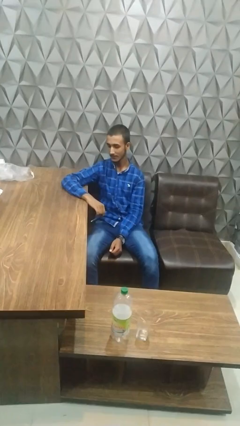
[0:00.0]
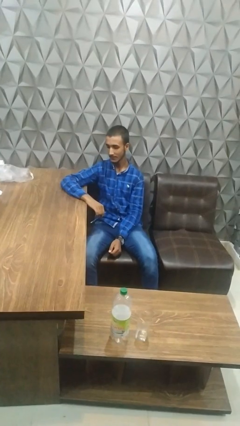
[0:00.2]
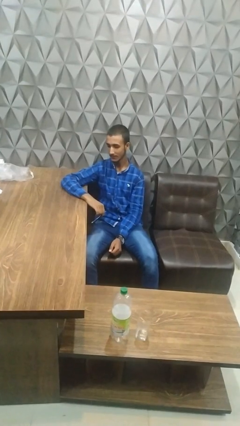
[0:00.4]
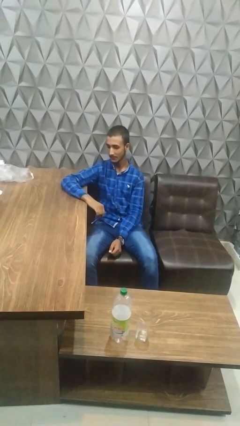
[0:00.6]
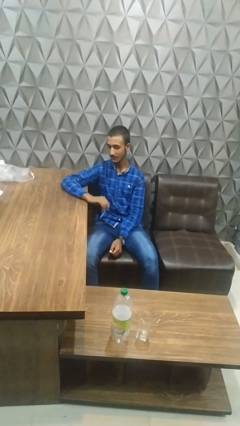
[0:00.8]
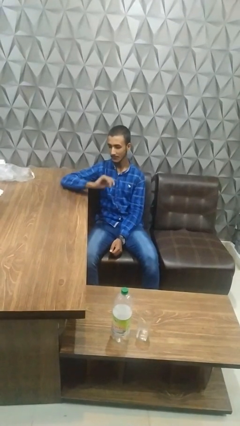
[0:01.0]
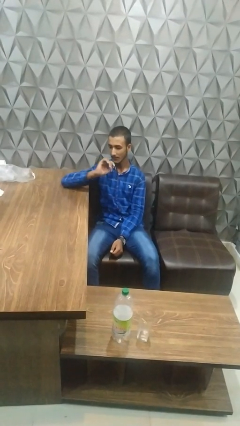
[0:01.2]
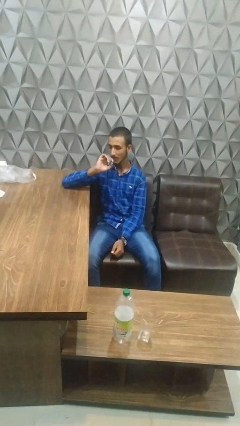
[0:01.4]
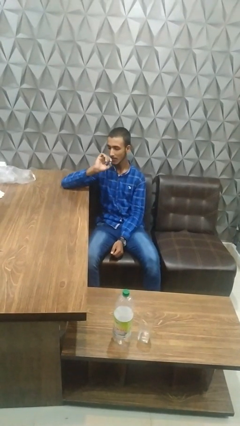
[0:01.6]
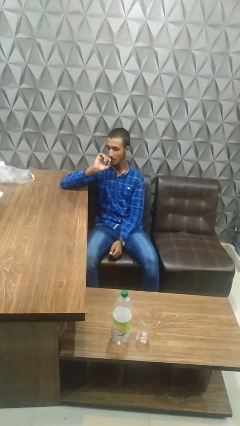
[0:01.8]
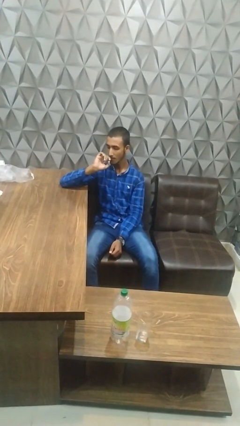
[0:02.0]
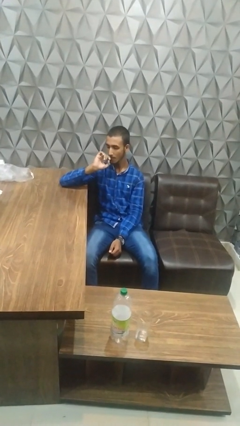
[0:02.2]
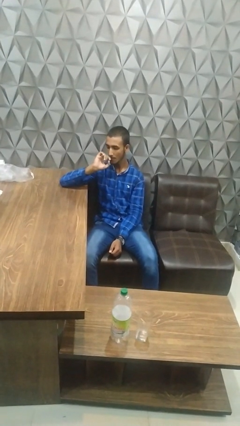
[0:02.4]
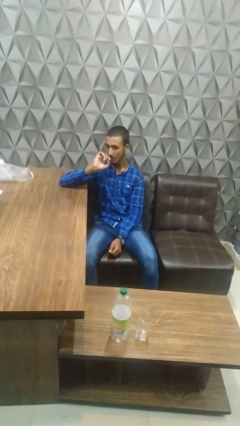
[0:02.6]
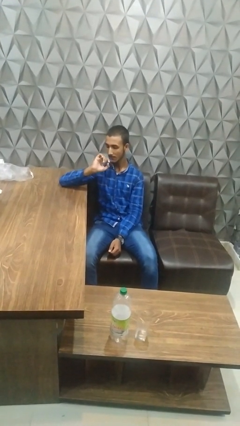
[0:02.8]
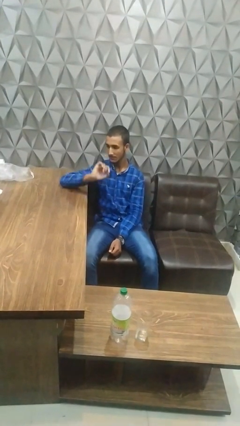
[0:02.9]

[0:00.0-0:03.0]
person vapes

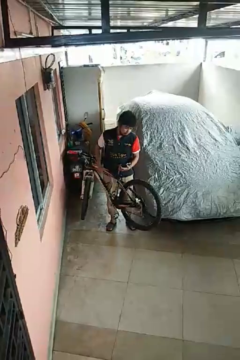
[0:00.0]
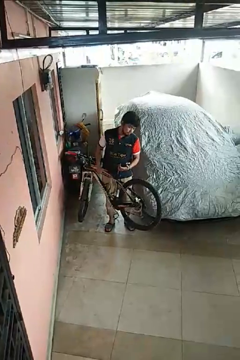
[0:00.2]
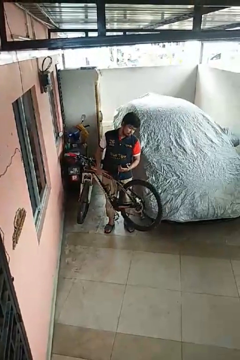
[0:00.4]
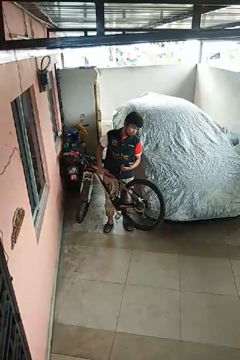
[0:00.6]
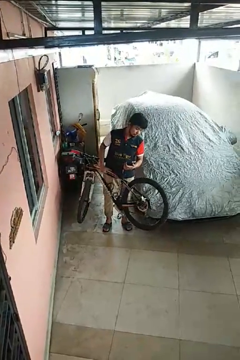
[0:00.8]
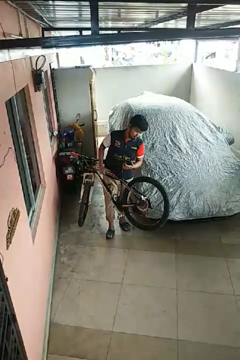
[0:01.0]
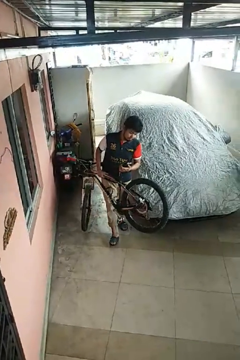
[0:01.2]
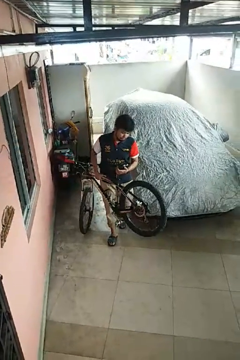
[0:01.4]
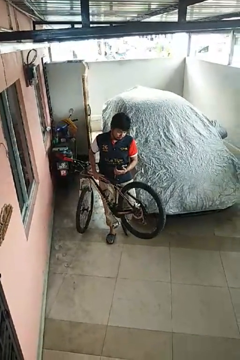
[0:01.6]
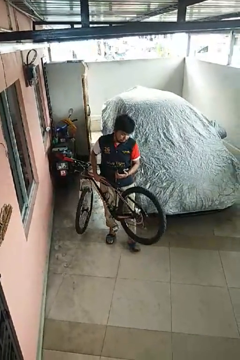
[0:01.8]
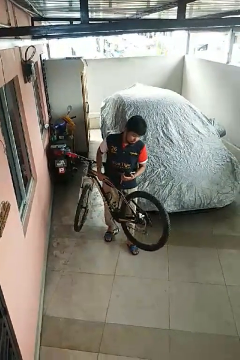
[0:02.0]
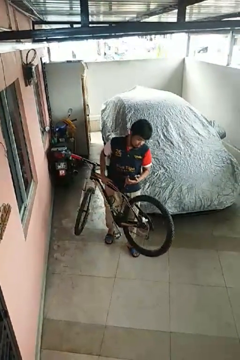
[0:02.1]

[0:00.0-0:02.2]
person carries bicycle

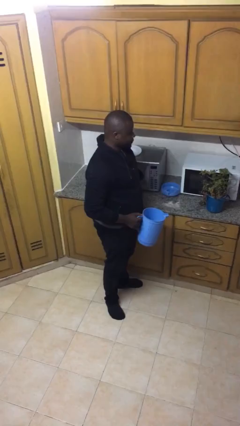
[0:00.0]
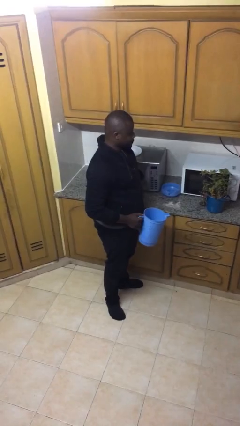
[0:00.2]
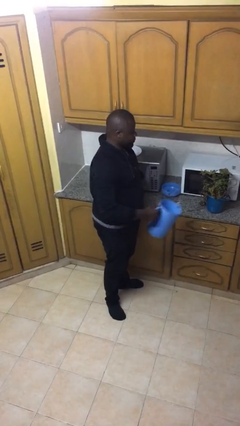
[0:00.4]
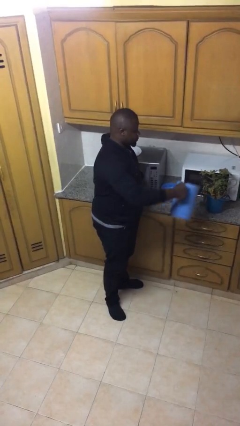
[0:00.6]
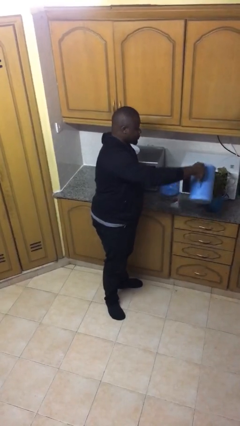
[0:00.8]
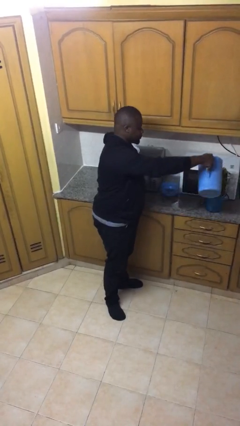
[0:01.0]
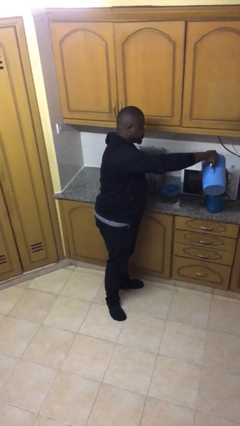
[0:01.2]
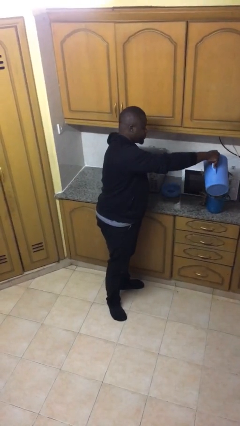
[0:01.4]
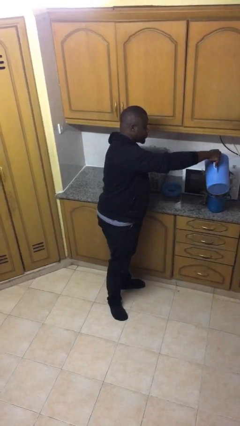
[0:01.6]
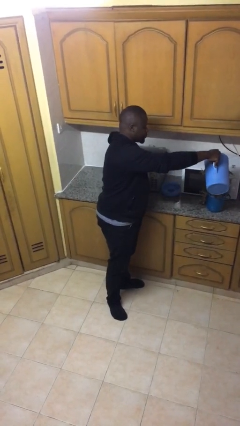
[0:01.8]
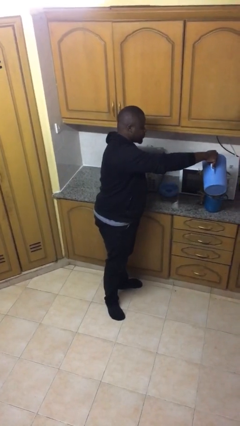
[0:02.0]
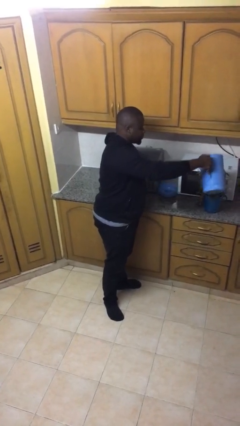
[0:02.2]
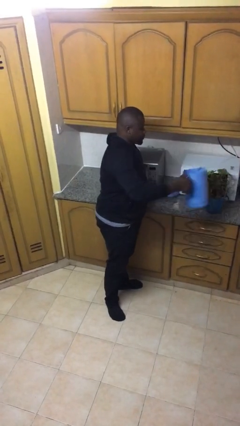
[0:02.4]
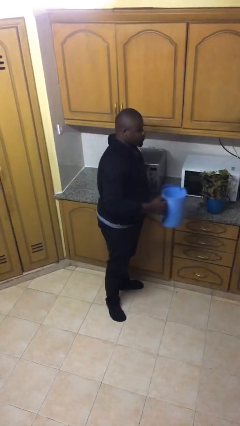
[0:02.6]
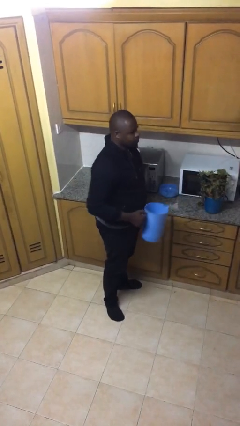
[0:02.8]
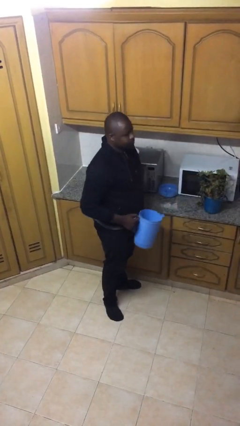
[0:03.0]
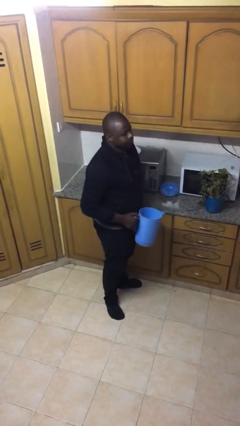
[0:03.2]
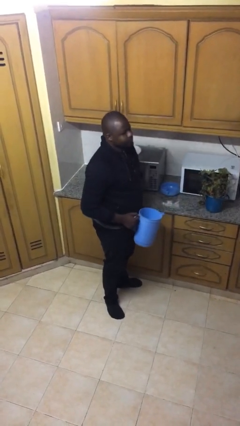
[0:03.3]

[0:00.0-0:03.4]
person waters houseplant

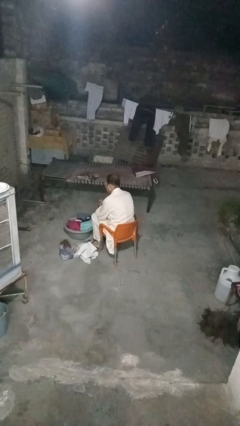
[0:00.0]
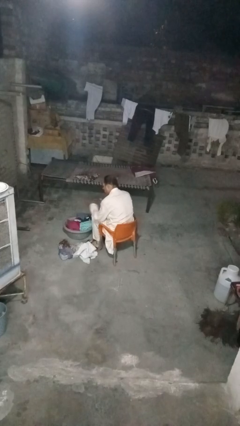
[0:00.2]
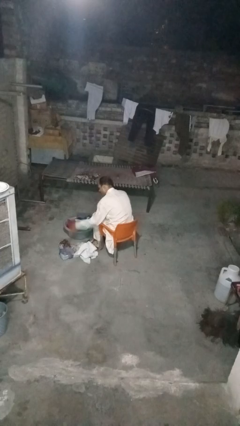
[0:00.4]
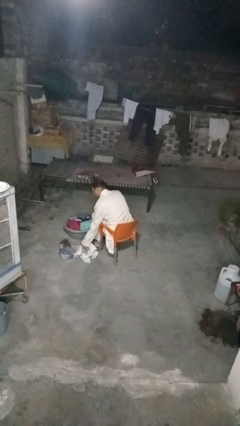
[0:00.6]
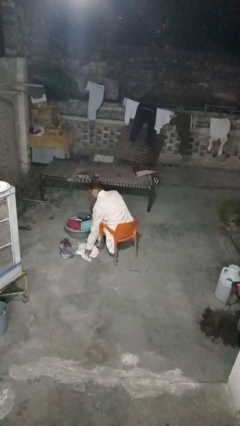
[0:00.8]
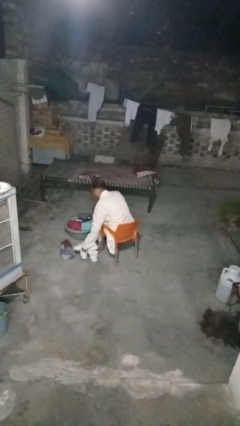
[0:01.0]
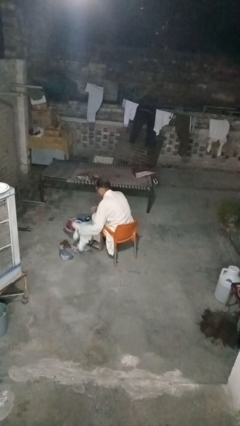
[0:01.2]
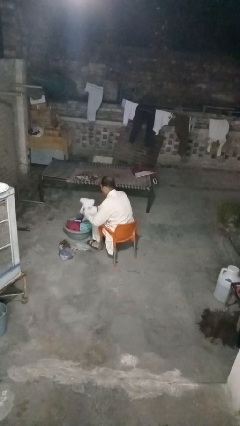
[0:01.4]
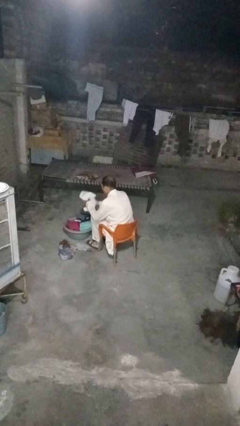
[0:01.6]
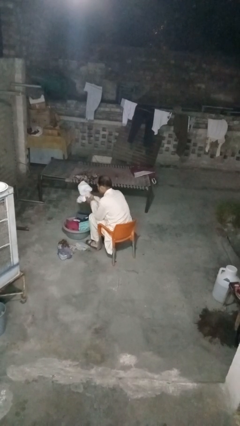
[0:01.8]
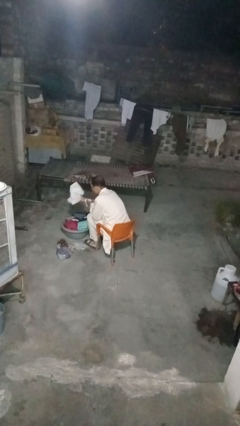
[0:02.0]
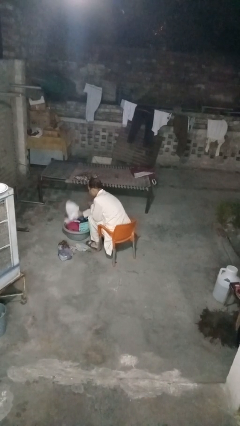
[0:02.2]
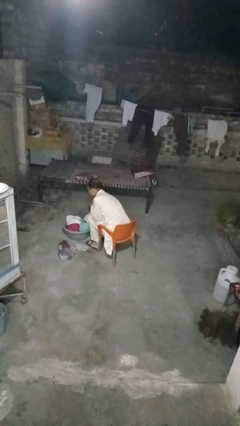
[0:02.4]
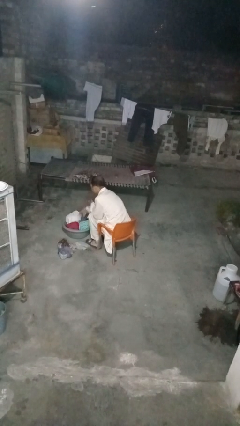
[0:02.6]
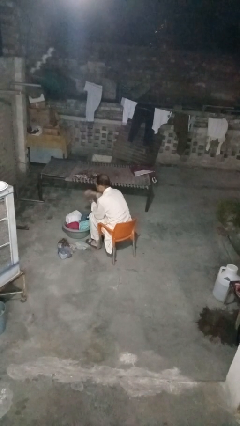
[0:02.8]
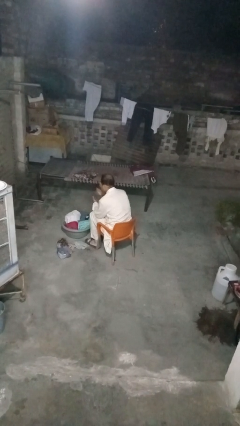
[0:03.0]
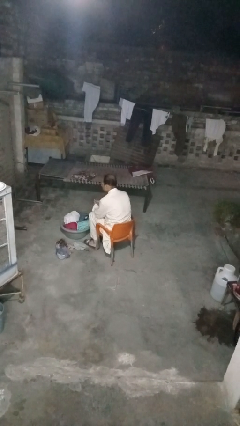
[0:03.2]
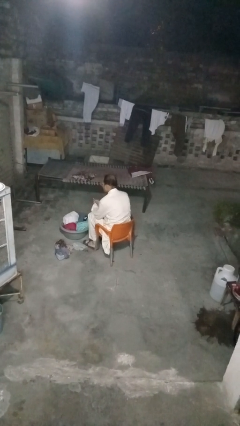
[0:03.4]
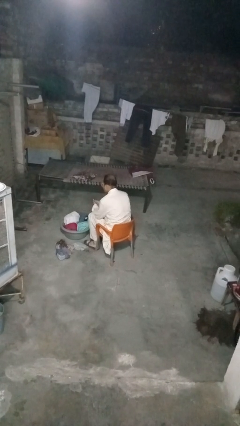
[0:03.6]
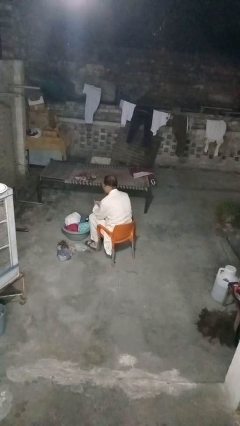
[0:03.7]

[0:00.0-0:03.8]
person puts object into basket

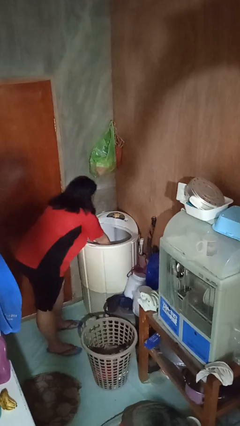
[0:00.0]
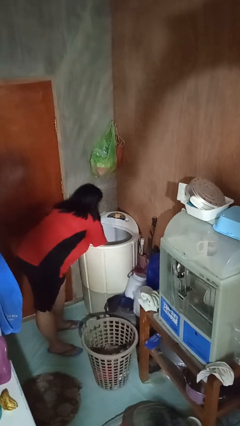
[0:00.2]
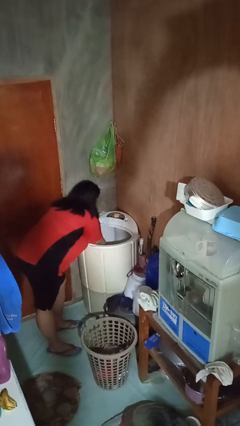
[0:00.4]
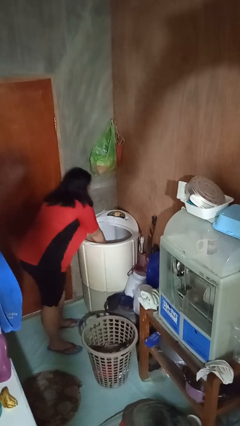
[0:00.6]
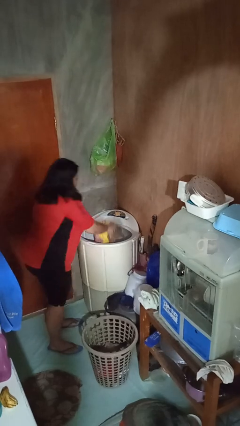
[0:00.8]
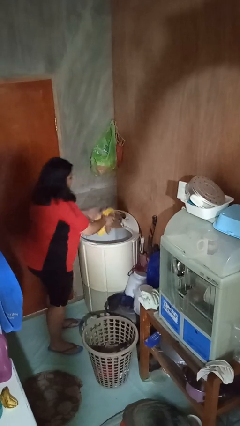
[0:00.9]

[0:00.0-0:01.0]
person loads clotheswasher

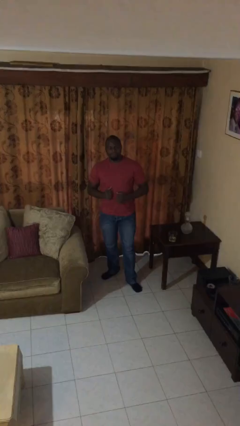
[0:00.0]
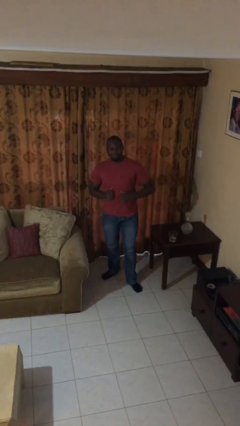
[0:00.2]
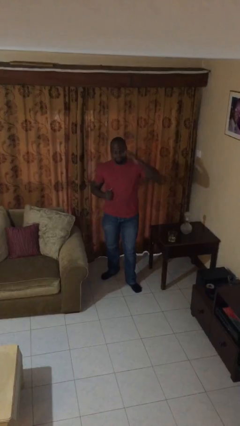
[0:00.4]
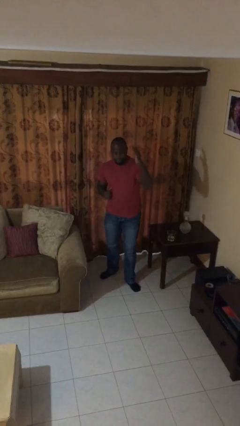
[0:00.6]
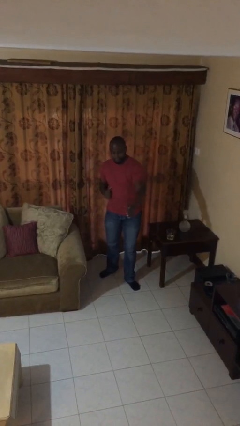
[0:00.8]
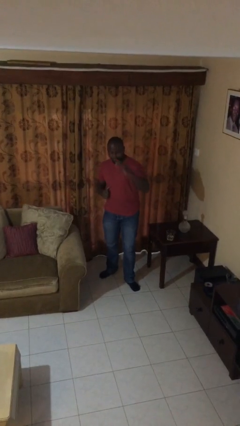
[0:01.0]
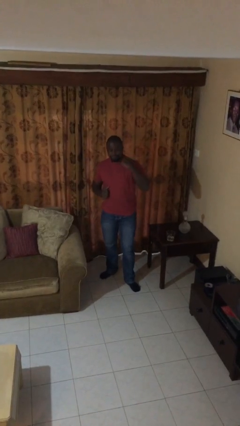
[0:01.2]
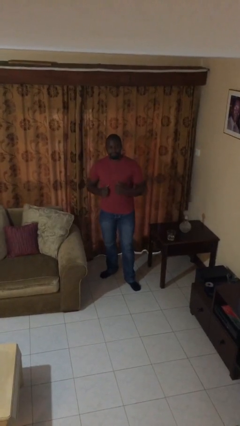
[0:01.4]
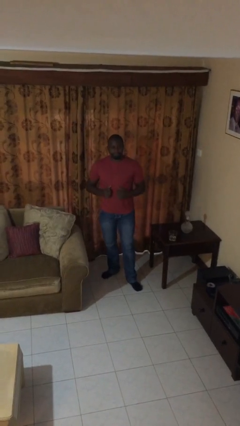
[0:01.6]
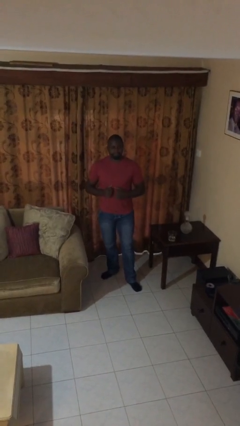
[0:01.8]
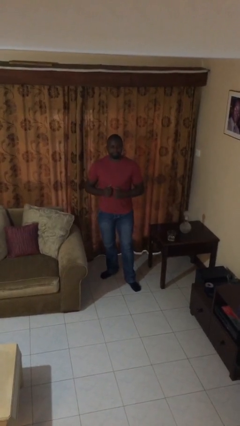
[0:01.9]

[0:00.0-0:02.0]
person karate chop

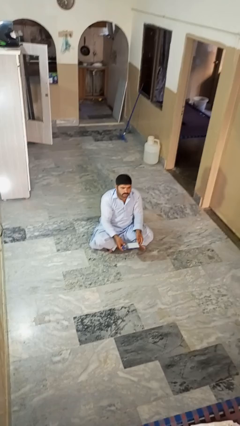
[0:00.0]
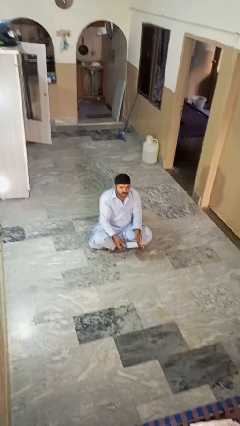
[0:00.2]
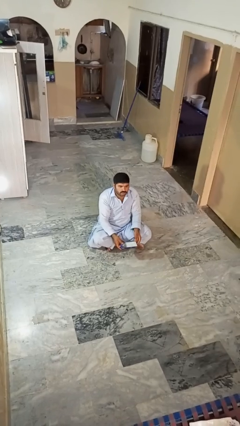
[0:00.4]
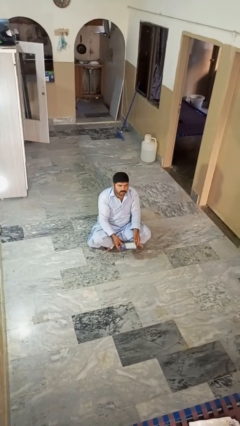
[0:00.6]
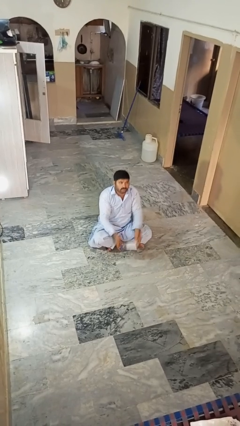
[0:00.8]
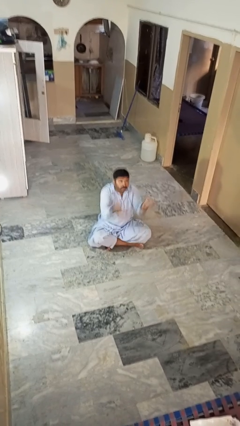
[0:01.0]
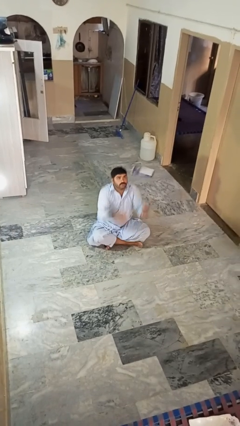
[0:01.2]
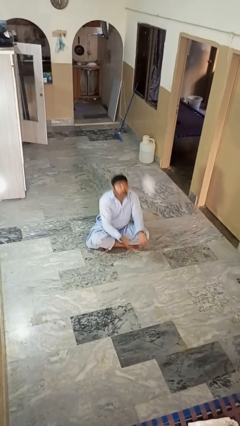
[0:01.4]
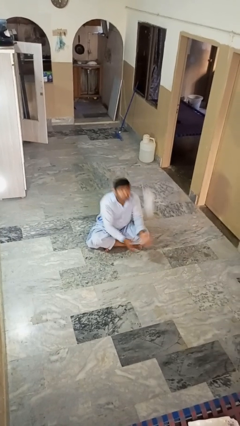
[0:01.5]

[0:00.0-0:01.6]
person drops object

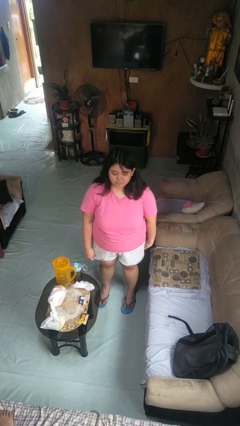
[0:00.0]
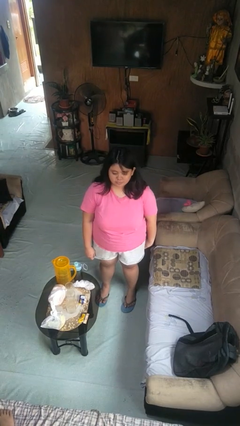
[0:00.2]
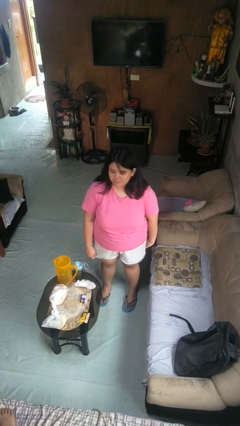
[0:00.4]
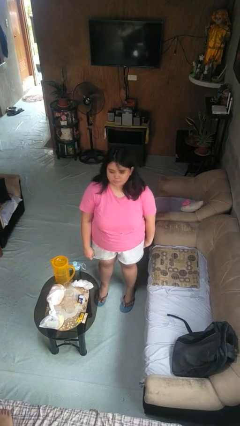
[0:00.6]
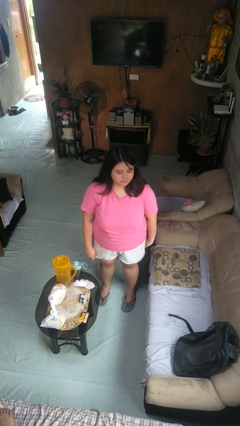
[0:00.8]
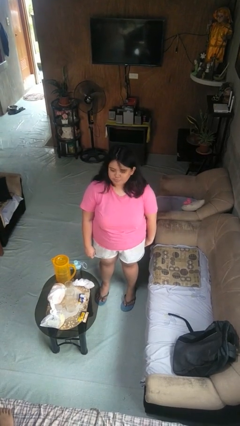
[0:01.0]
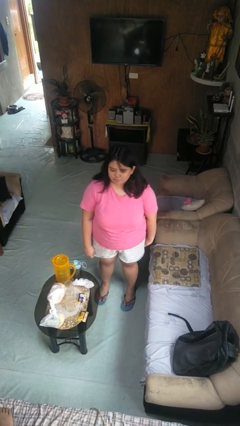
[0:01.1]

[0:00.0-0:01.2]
person shakes head
